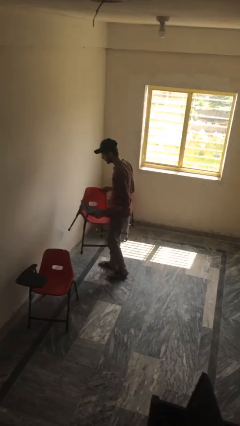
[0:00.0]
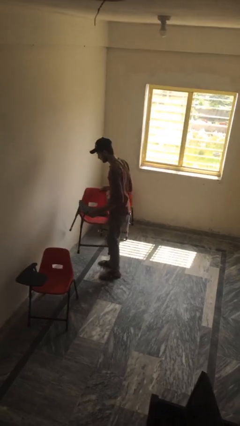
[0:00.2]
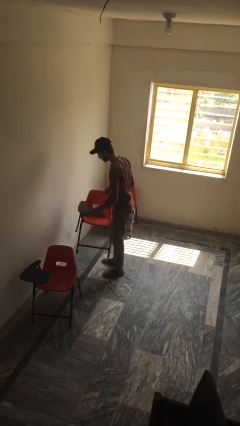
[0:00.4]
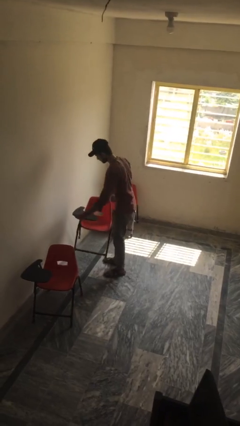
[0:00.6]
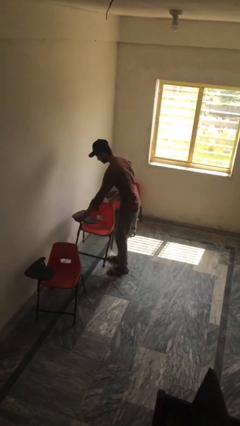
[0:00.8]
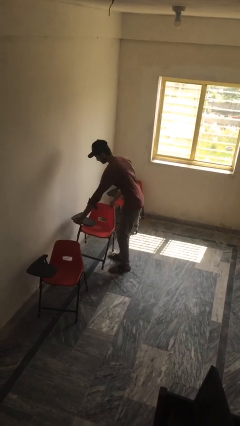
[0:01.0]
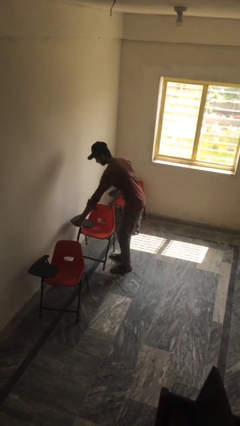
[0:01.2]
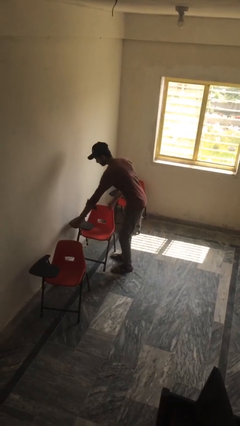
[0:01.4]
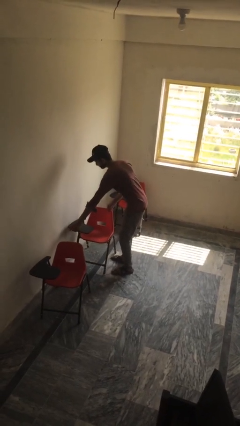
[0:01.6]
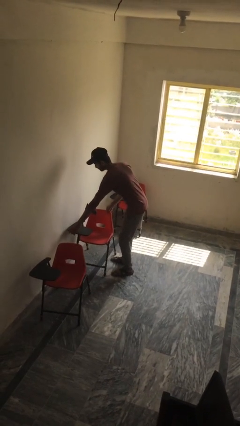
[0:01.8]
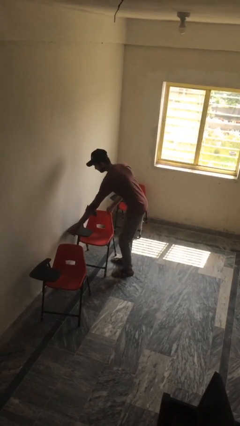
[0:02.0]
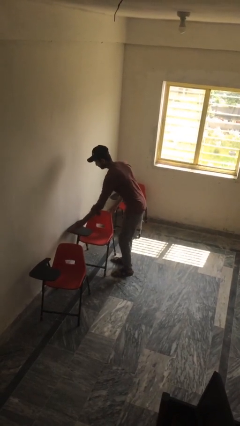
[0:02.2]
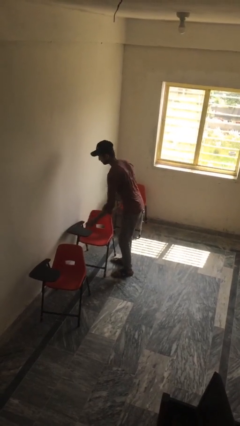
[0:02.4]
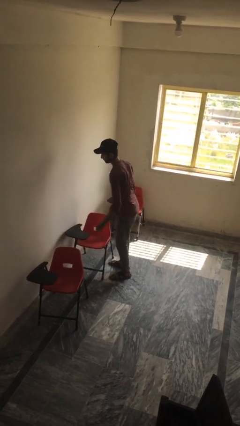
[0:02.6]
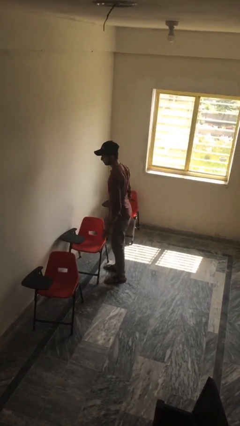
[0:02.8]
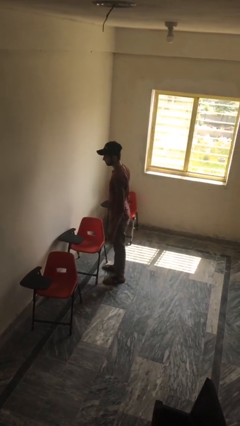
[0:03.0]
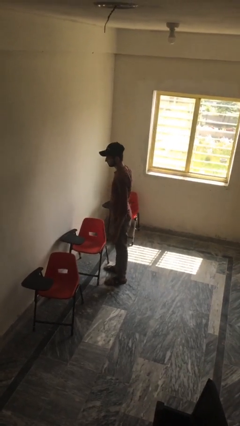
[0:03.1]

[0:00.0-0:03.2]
person puts down object on floor

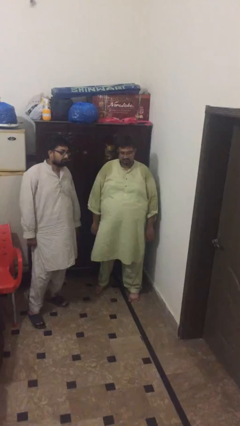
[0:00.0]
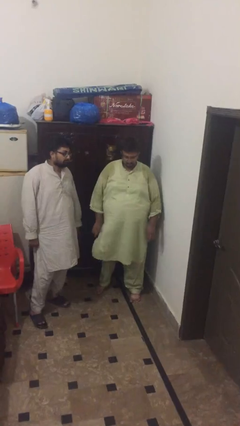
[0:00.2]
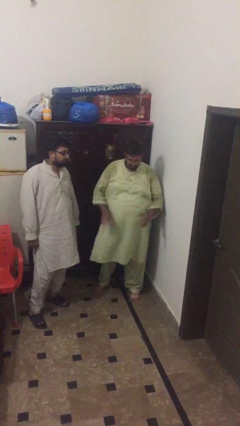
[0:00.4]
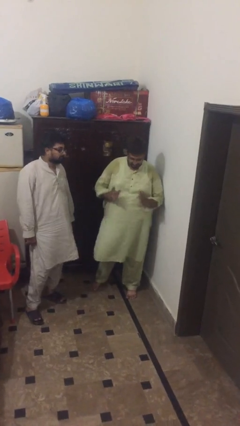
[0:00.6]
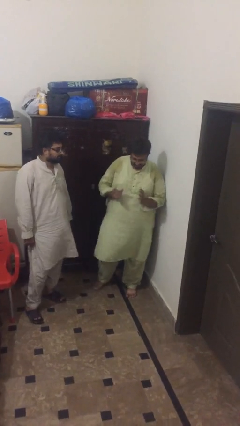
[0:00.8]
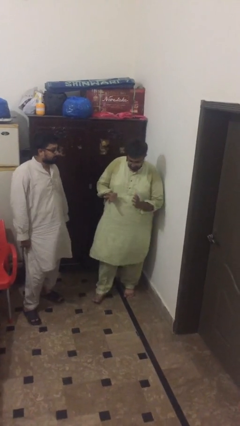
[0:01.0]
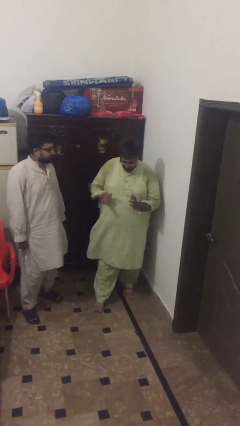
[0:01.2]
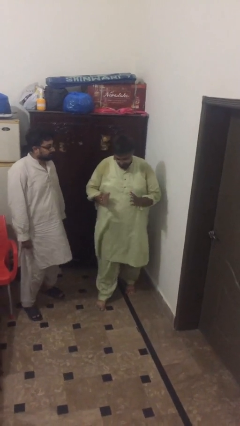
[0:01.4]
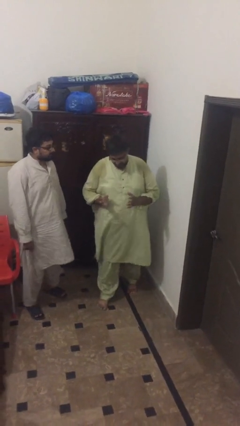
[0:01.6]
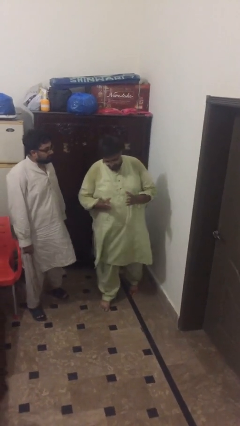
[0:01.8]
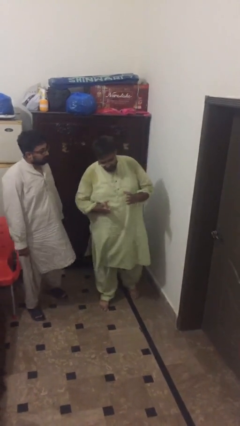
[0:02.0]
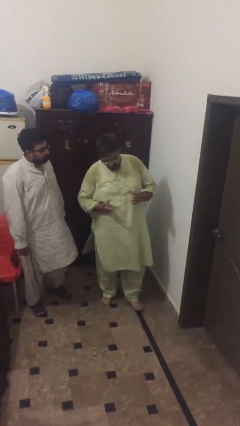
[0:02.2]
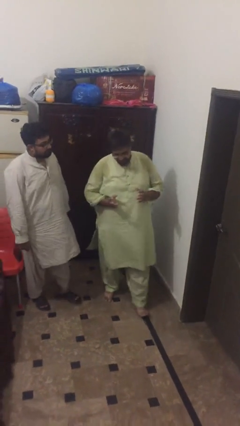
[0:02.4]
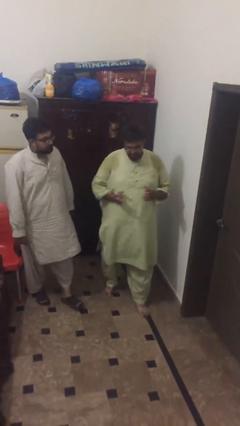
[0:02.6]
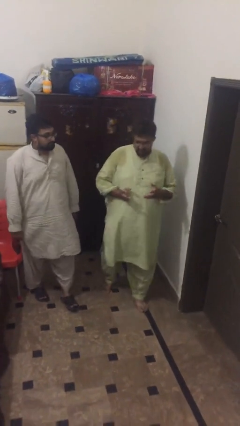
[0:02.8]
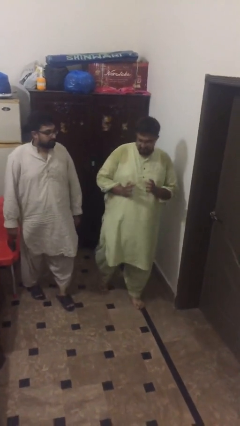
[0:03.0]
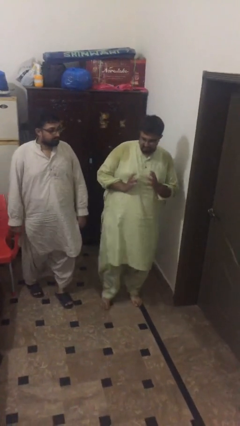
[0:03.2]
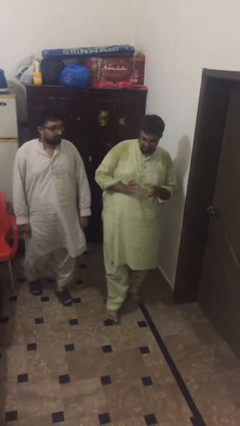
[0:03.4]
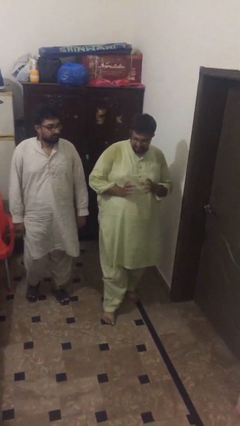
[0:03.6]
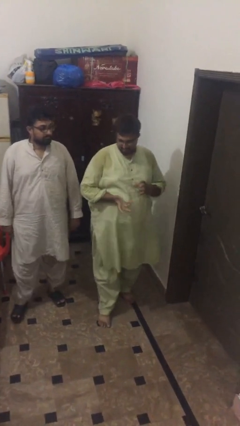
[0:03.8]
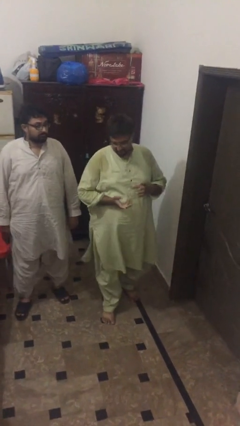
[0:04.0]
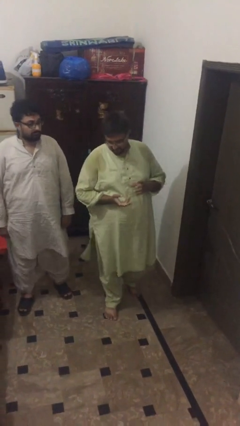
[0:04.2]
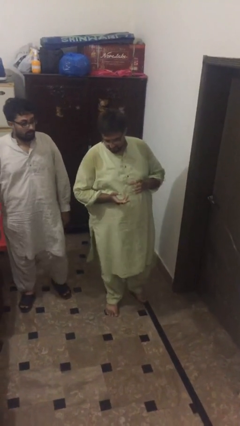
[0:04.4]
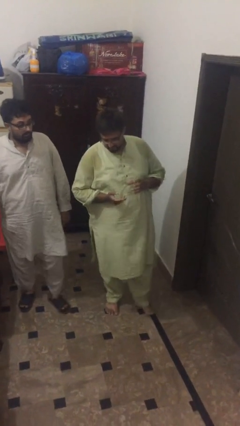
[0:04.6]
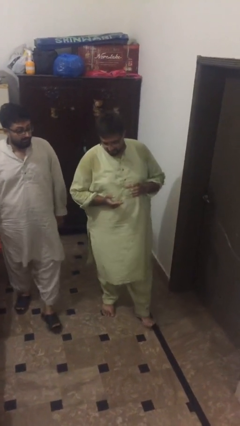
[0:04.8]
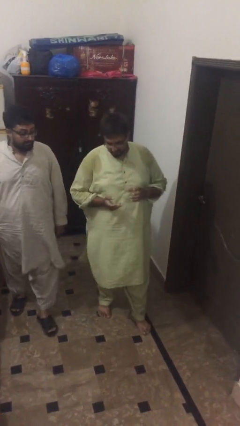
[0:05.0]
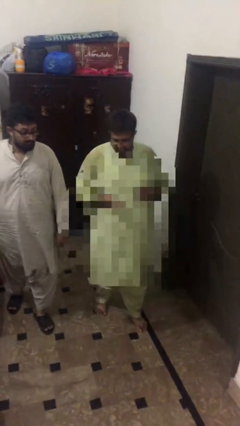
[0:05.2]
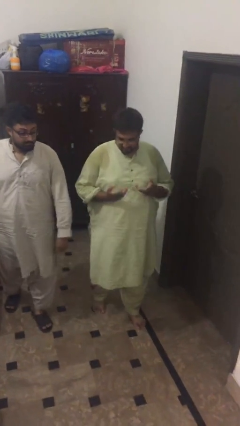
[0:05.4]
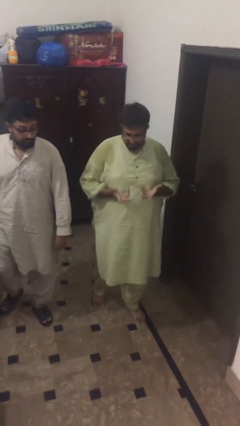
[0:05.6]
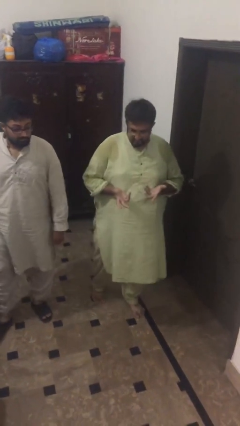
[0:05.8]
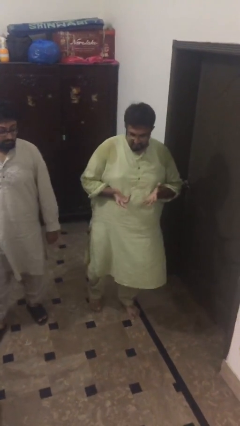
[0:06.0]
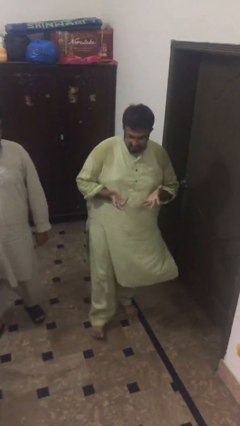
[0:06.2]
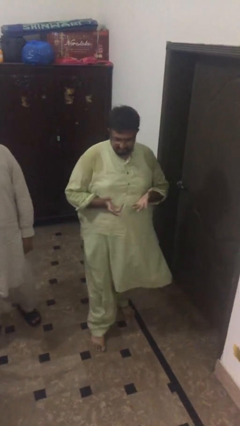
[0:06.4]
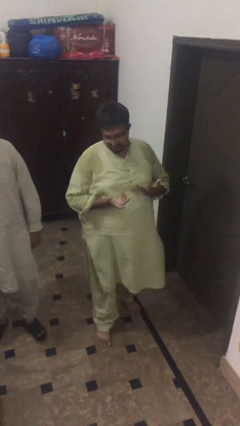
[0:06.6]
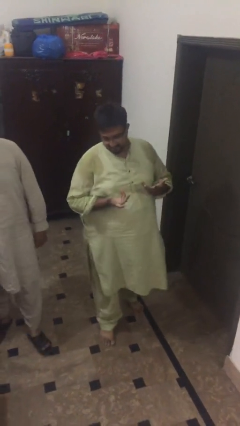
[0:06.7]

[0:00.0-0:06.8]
person talks to person

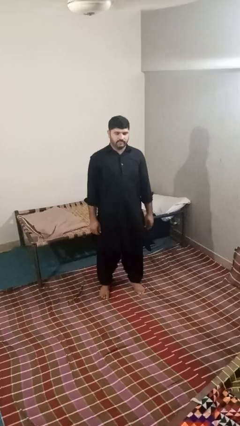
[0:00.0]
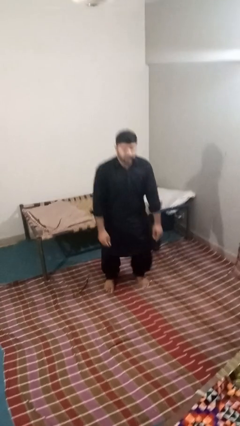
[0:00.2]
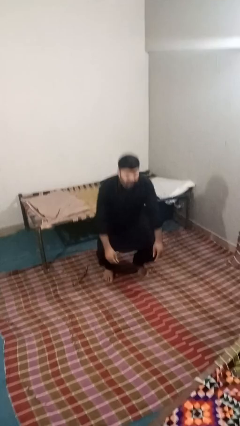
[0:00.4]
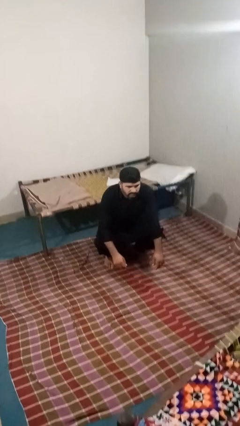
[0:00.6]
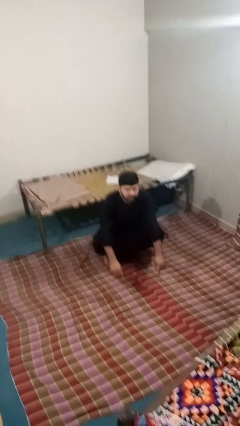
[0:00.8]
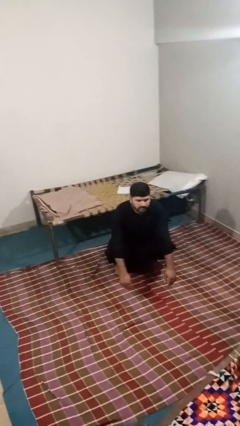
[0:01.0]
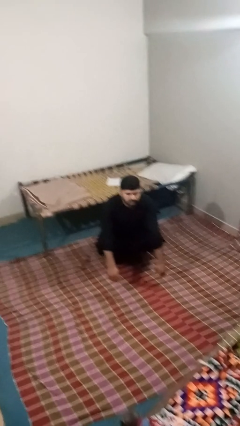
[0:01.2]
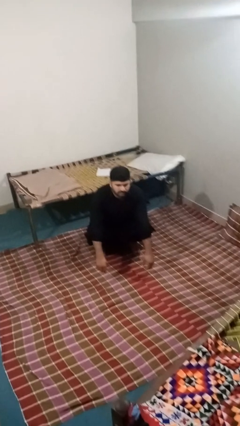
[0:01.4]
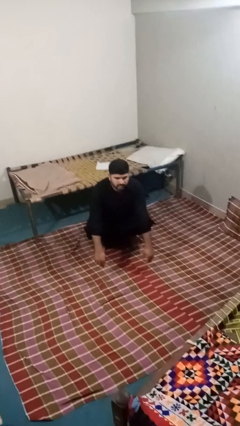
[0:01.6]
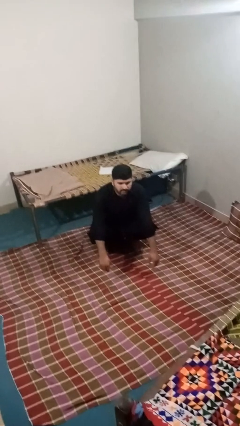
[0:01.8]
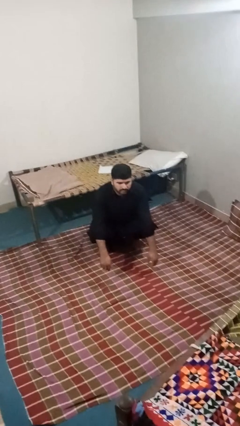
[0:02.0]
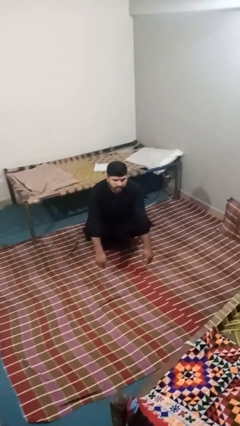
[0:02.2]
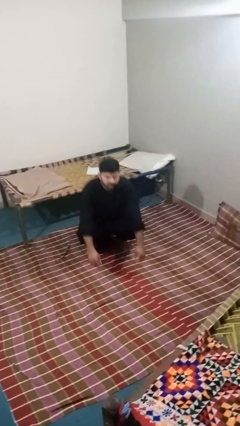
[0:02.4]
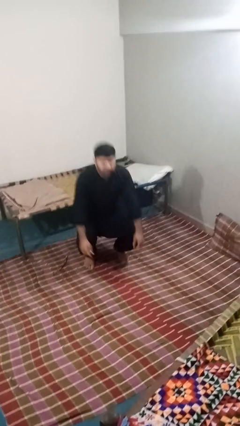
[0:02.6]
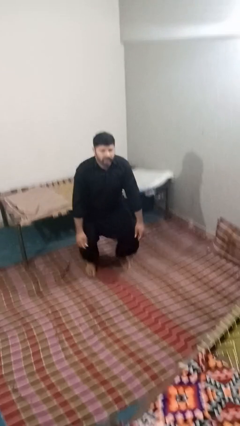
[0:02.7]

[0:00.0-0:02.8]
person squats

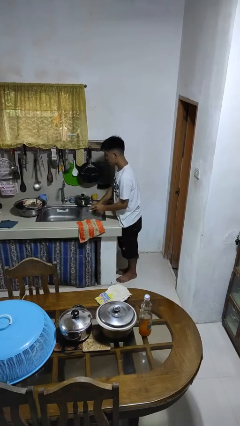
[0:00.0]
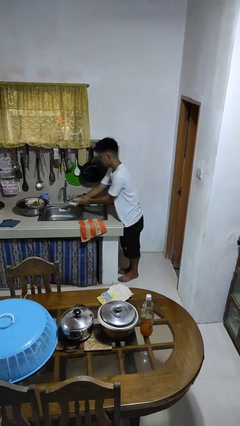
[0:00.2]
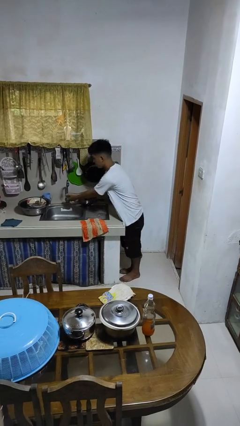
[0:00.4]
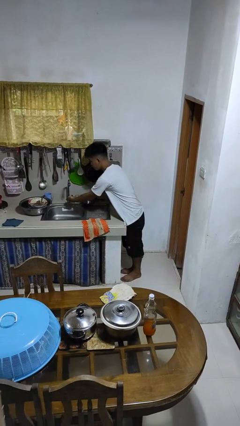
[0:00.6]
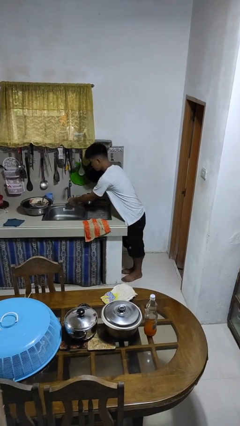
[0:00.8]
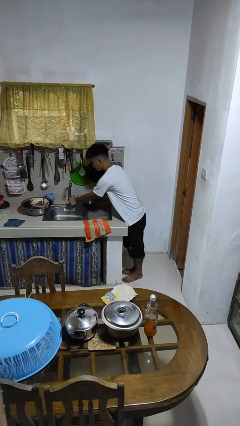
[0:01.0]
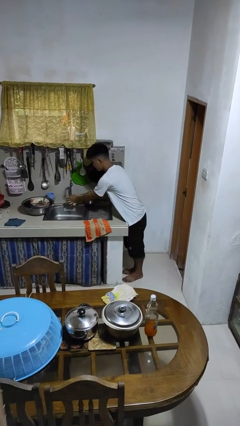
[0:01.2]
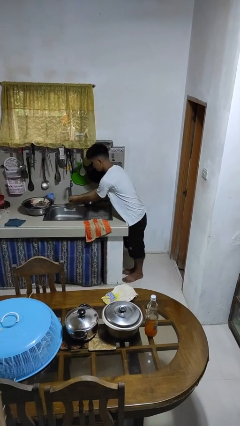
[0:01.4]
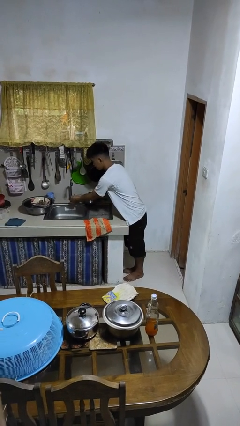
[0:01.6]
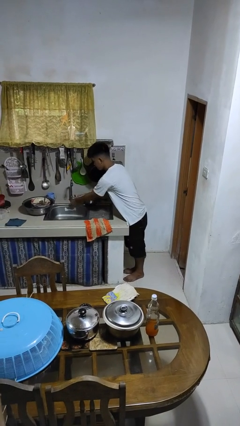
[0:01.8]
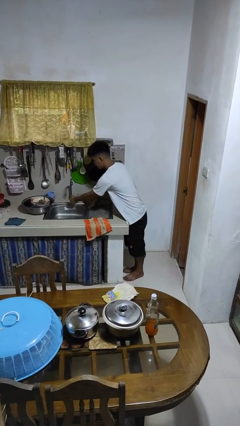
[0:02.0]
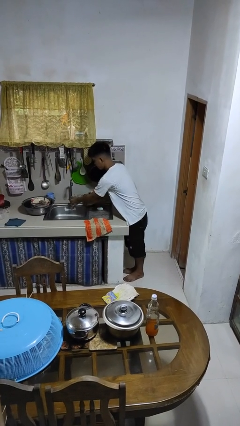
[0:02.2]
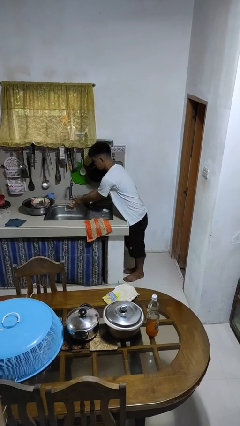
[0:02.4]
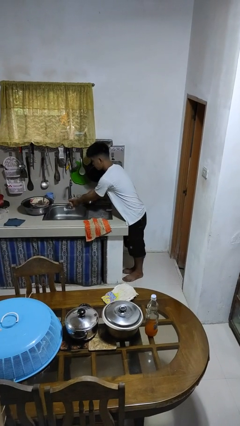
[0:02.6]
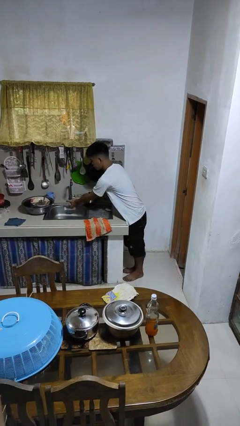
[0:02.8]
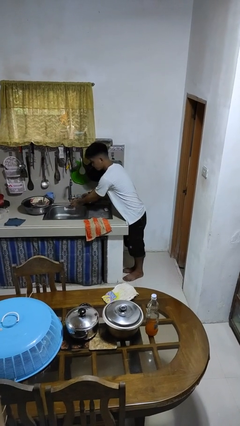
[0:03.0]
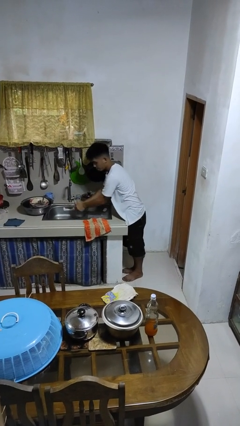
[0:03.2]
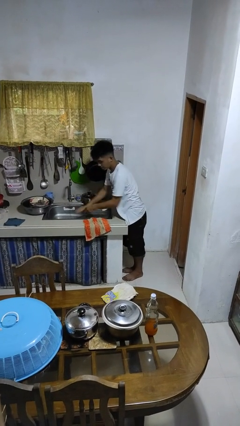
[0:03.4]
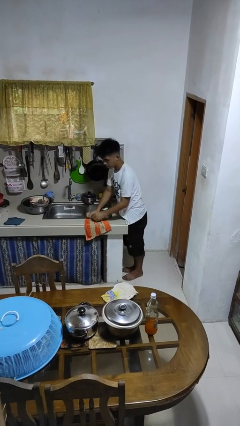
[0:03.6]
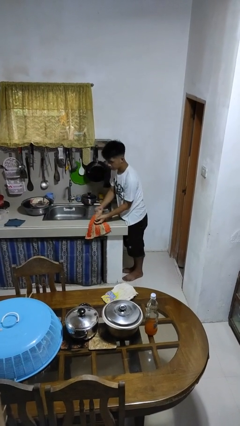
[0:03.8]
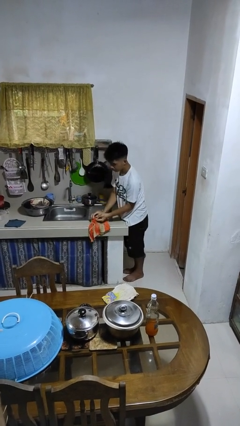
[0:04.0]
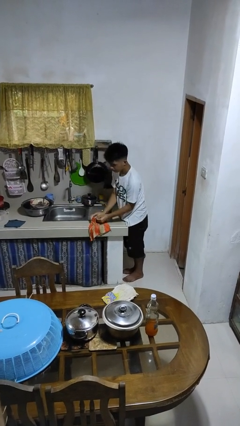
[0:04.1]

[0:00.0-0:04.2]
person washes hands

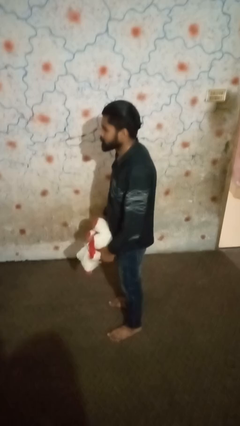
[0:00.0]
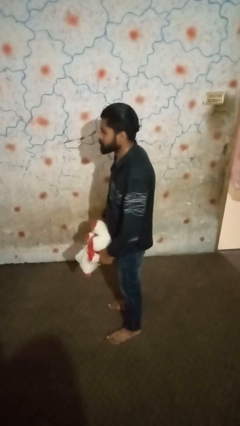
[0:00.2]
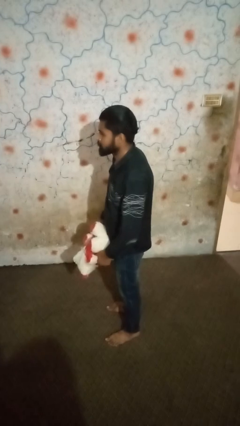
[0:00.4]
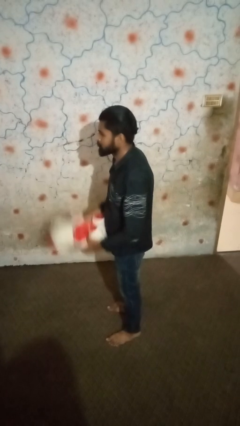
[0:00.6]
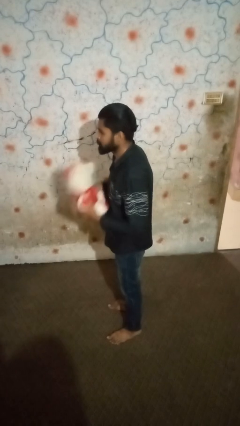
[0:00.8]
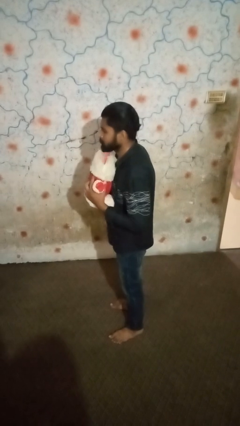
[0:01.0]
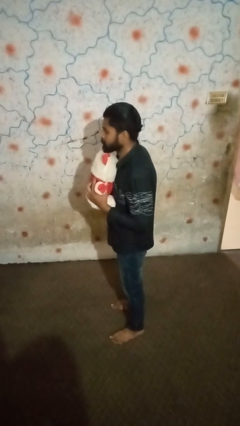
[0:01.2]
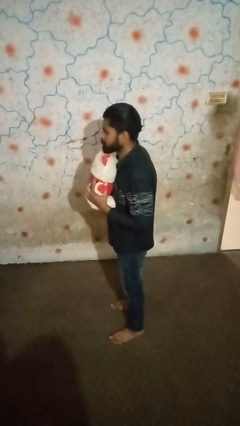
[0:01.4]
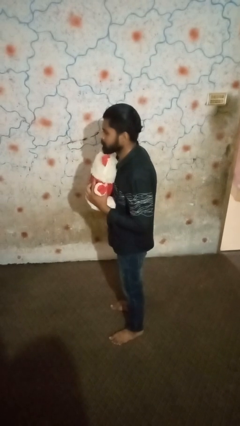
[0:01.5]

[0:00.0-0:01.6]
person hugs stuffed animal
